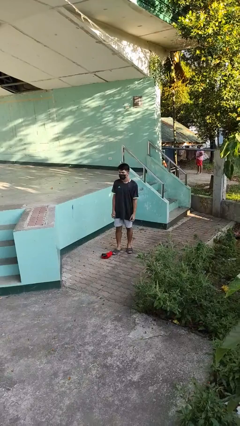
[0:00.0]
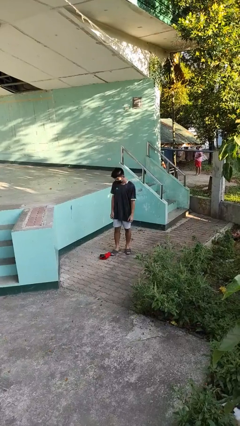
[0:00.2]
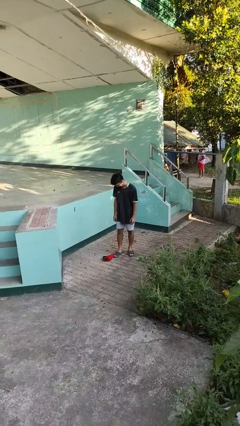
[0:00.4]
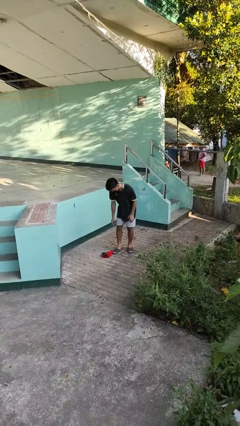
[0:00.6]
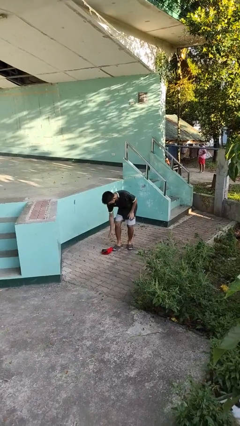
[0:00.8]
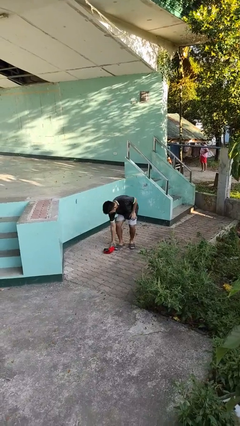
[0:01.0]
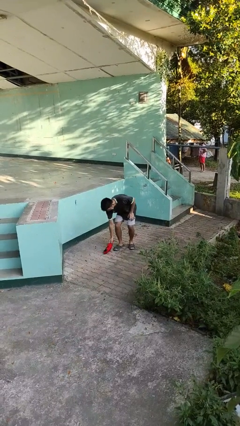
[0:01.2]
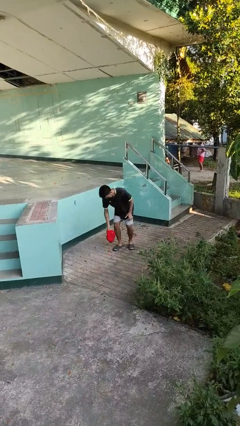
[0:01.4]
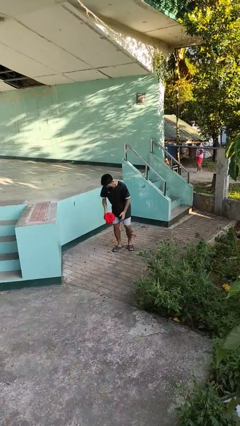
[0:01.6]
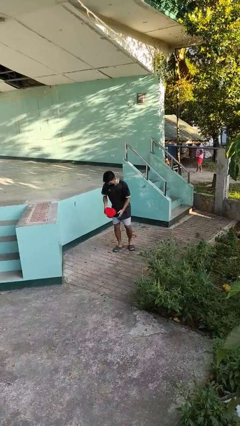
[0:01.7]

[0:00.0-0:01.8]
person picks up object from floor

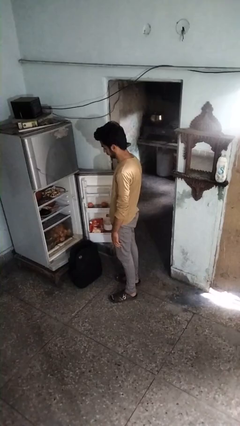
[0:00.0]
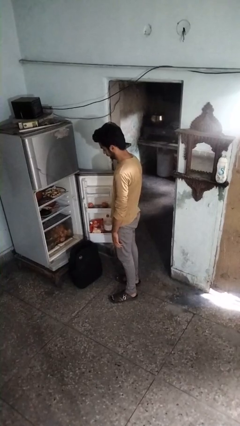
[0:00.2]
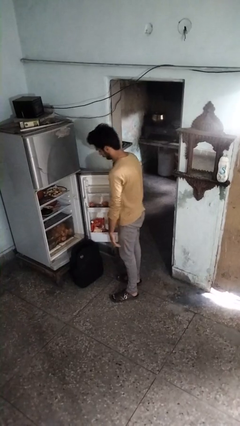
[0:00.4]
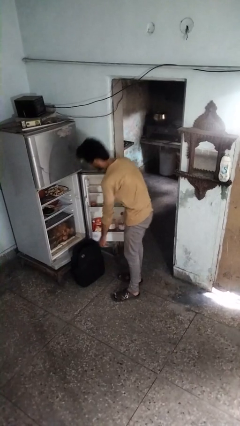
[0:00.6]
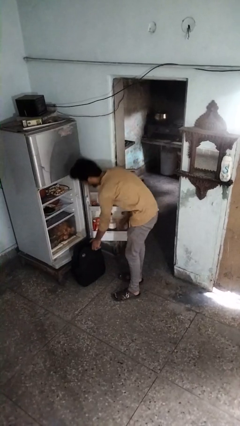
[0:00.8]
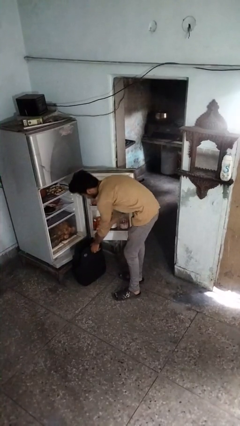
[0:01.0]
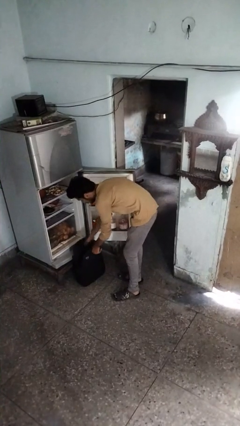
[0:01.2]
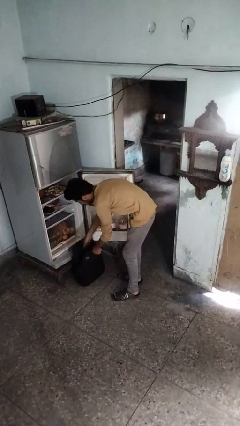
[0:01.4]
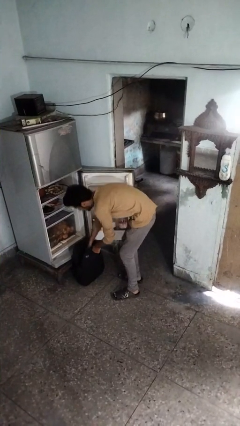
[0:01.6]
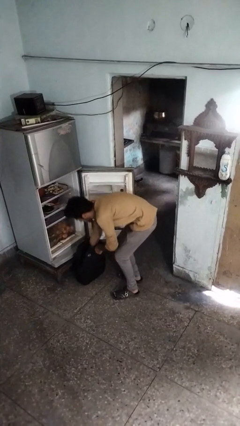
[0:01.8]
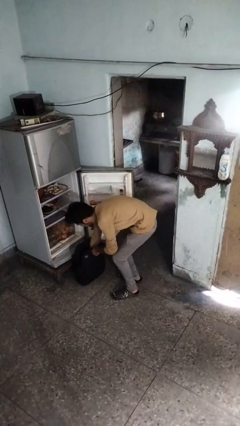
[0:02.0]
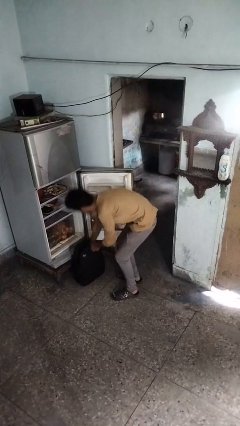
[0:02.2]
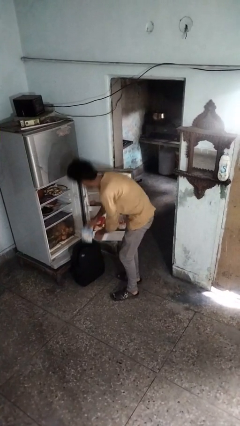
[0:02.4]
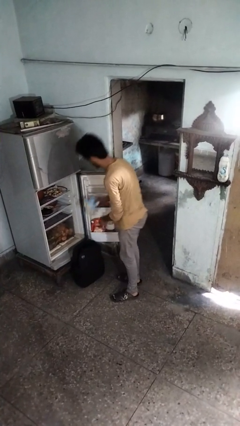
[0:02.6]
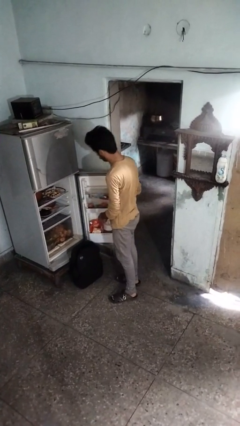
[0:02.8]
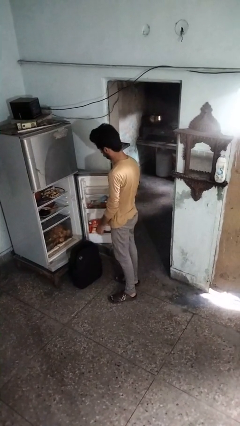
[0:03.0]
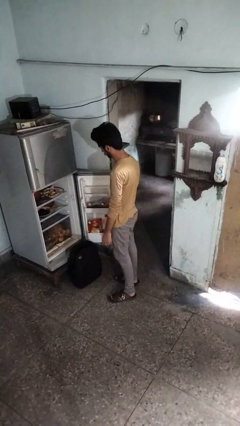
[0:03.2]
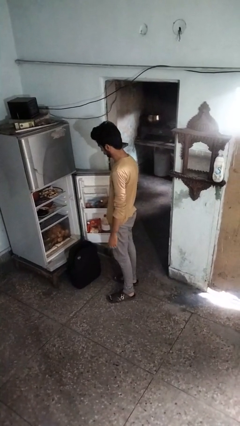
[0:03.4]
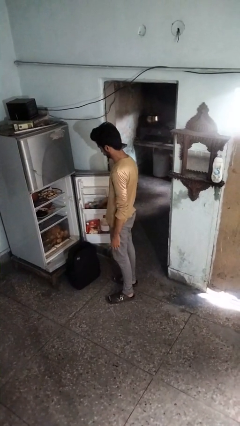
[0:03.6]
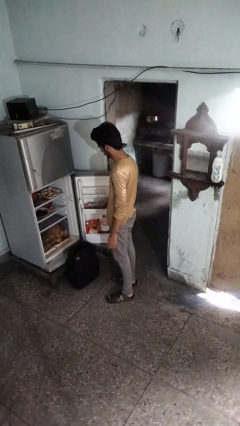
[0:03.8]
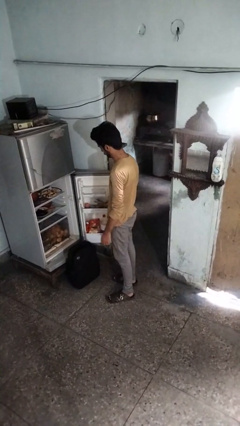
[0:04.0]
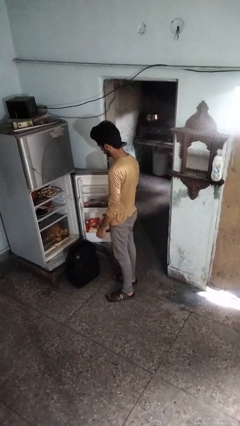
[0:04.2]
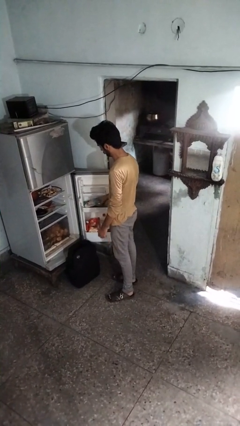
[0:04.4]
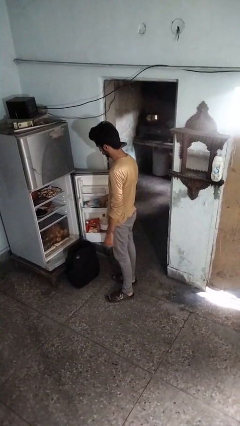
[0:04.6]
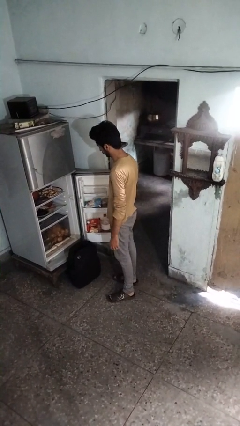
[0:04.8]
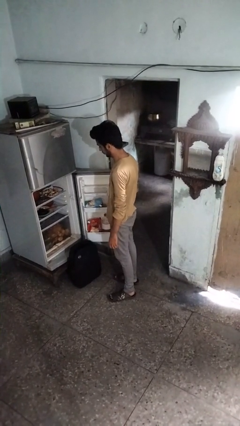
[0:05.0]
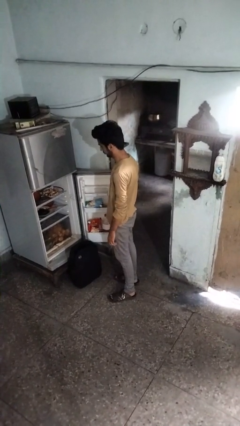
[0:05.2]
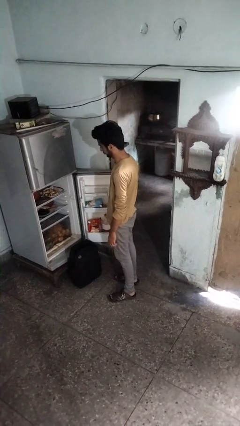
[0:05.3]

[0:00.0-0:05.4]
person loads groceries into refrigerator

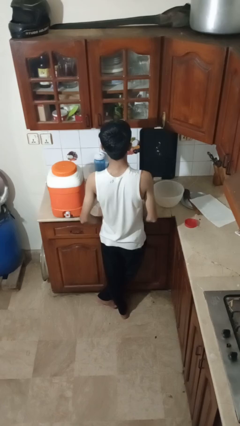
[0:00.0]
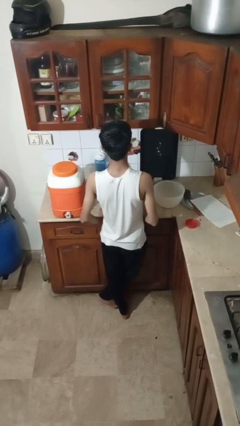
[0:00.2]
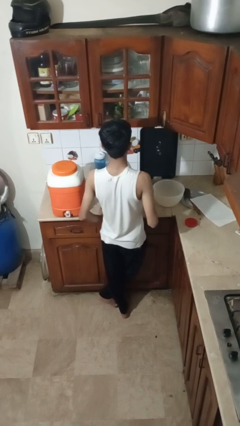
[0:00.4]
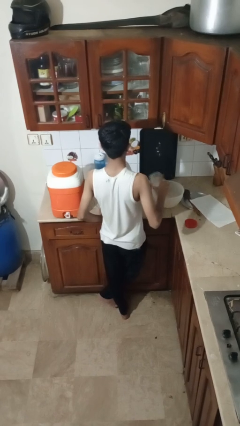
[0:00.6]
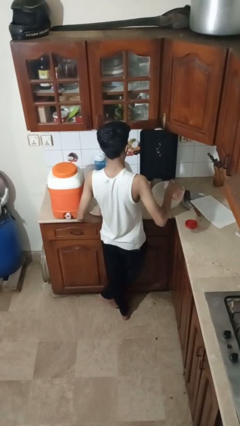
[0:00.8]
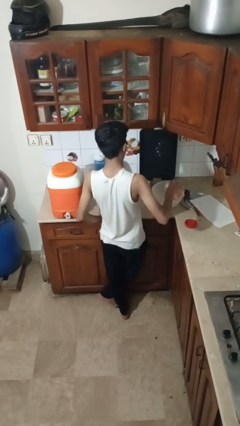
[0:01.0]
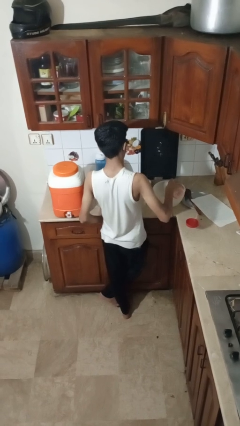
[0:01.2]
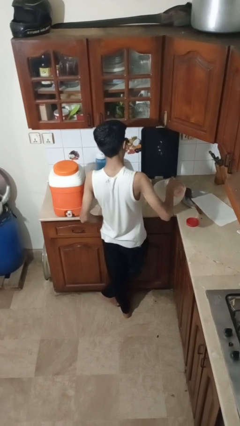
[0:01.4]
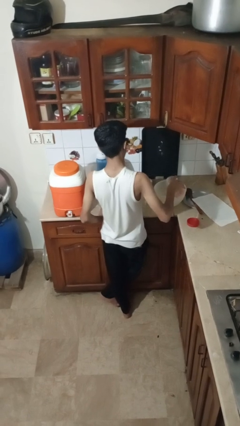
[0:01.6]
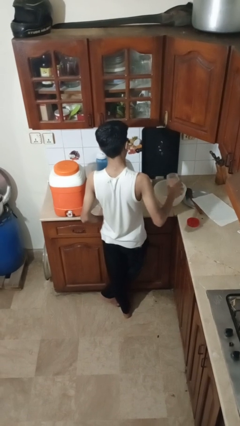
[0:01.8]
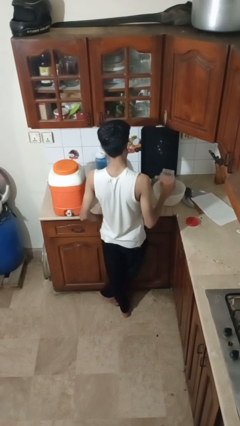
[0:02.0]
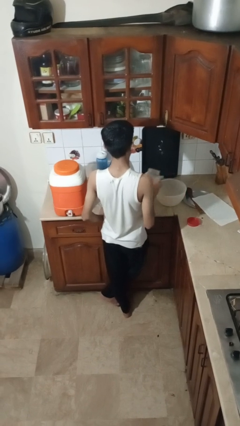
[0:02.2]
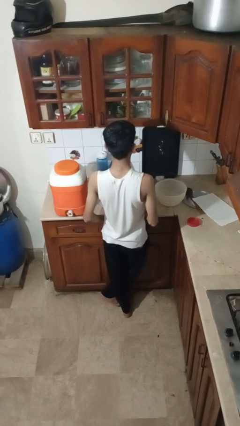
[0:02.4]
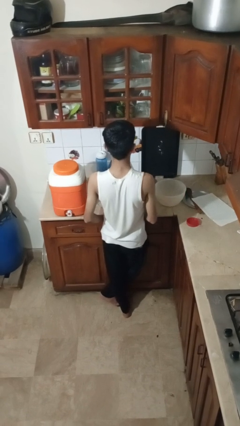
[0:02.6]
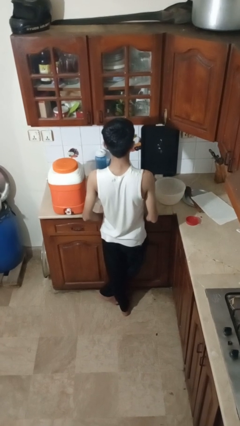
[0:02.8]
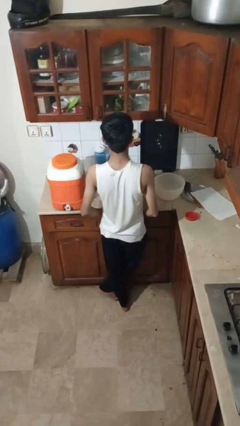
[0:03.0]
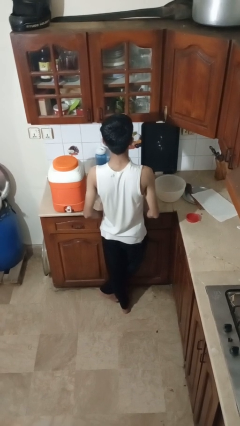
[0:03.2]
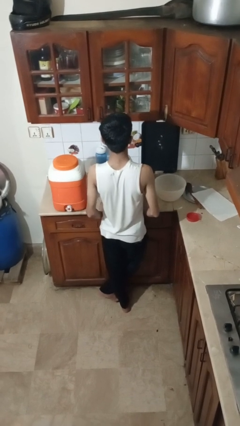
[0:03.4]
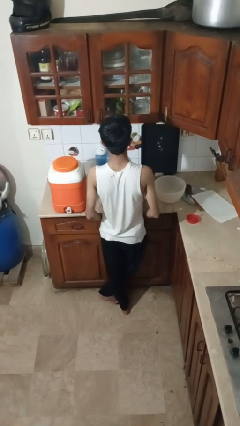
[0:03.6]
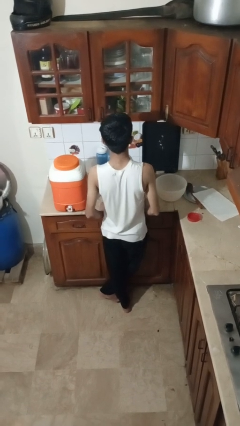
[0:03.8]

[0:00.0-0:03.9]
person pours into bowl

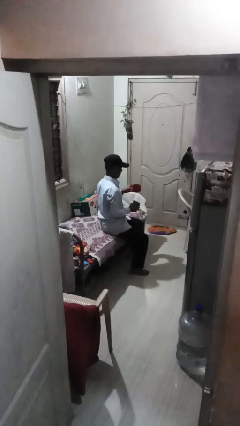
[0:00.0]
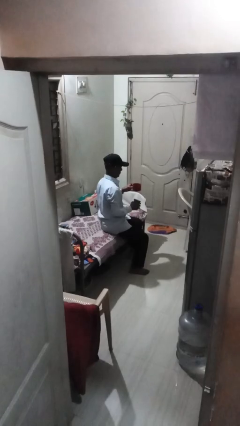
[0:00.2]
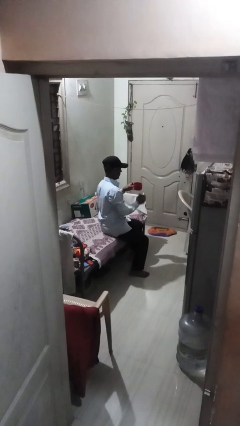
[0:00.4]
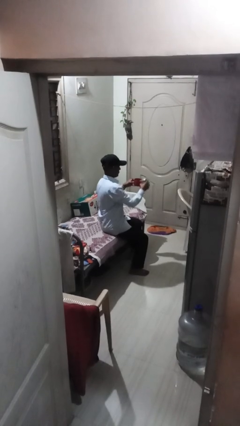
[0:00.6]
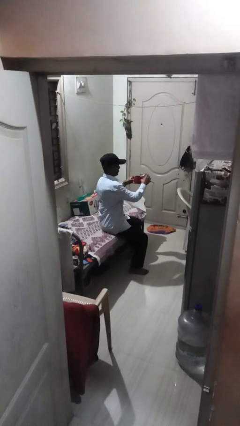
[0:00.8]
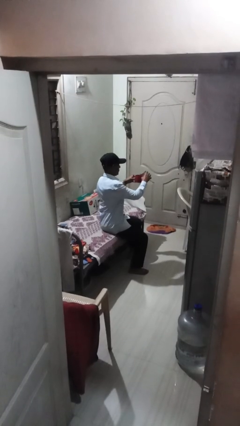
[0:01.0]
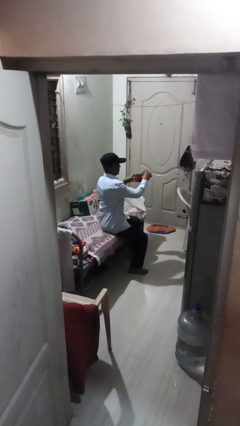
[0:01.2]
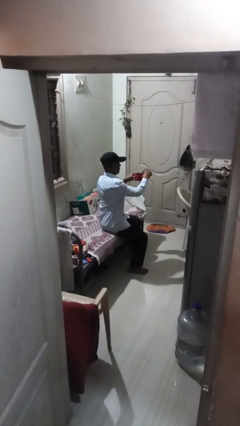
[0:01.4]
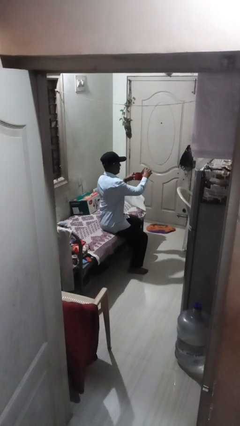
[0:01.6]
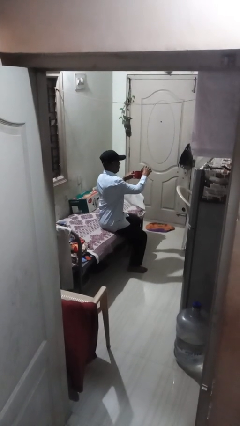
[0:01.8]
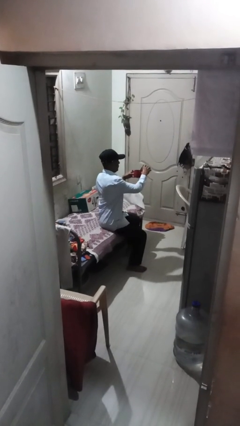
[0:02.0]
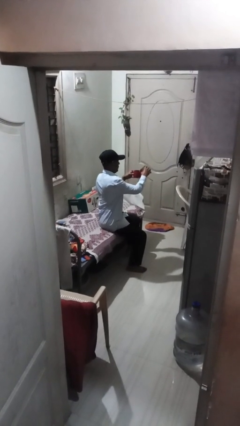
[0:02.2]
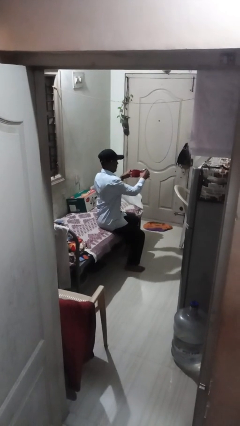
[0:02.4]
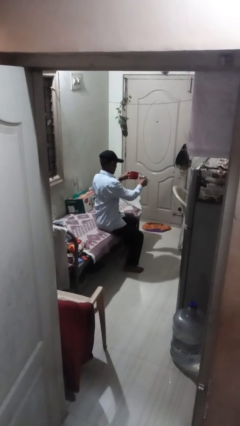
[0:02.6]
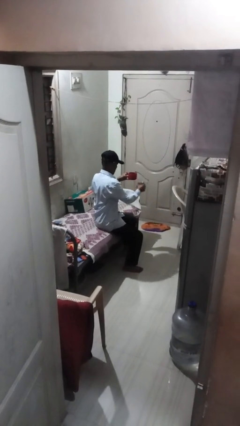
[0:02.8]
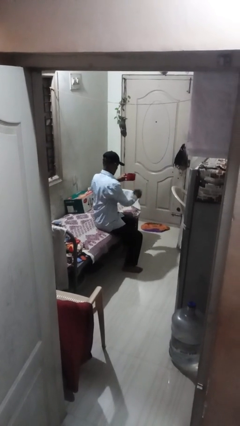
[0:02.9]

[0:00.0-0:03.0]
person pours coffee into mug

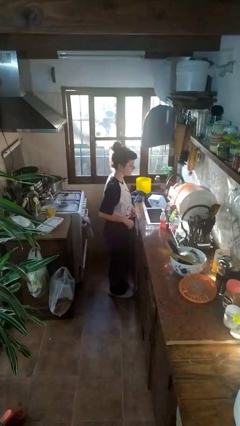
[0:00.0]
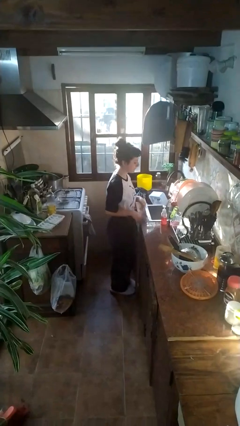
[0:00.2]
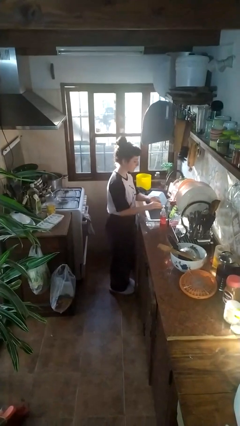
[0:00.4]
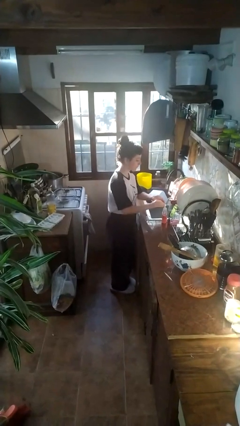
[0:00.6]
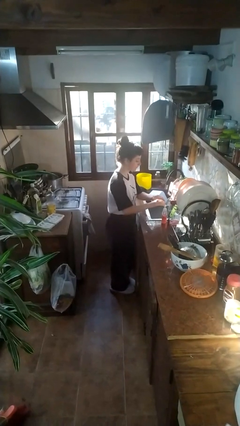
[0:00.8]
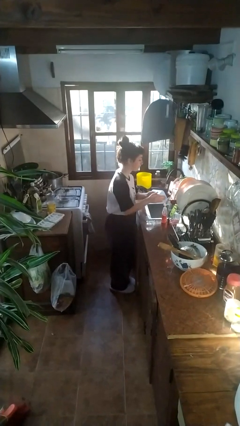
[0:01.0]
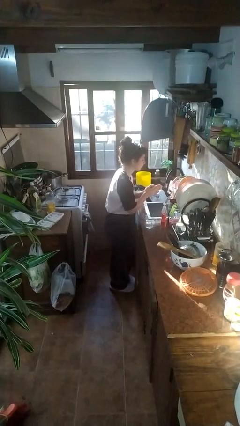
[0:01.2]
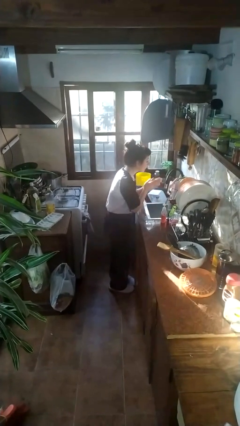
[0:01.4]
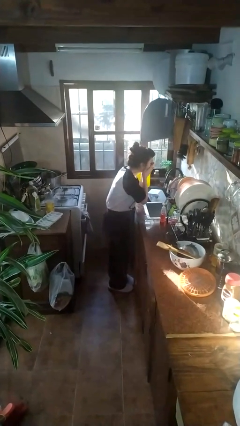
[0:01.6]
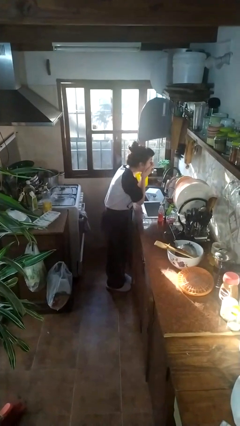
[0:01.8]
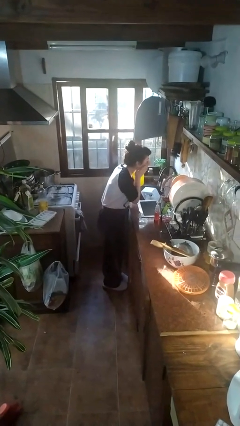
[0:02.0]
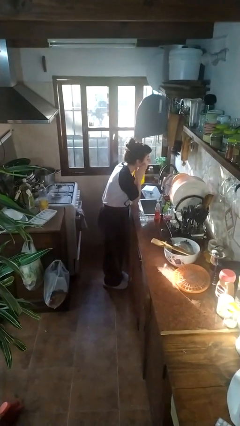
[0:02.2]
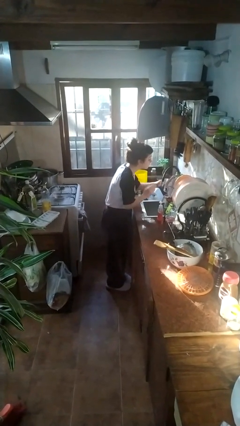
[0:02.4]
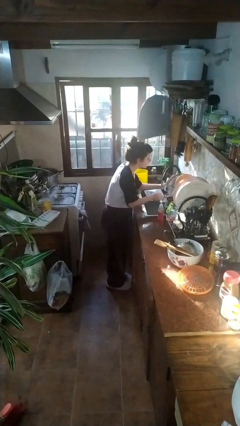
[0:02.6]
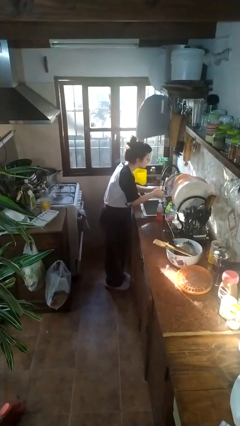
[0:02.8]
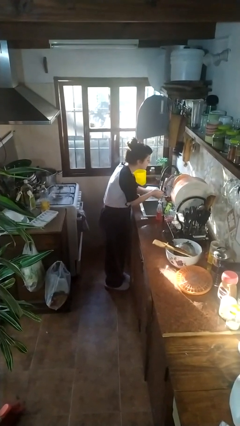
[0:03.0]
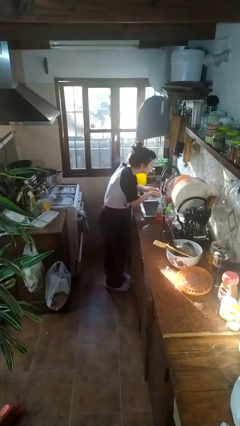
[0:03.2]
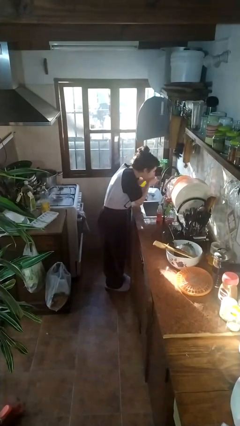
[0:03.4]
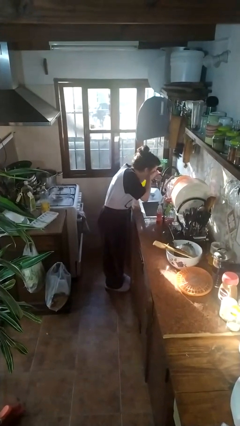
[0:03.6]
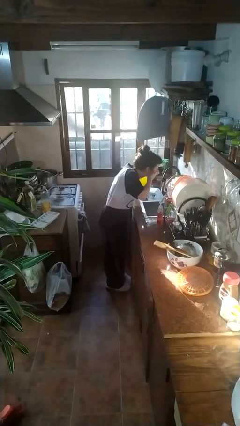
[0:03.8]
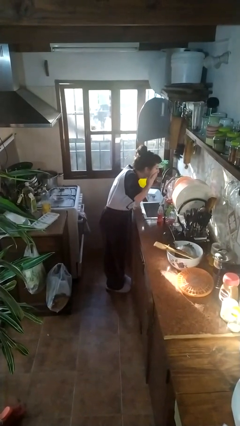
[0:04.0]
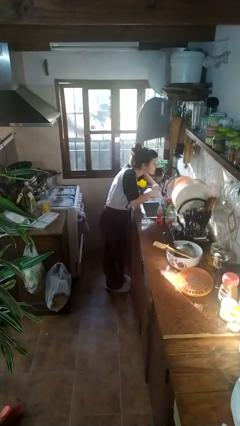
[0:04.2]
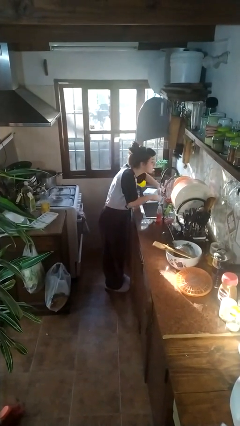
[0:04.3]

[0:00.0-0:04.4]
person washes face
